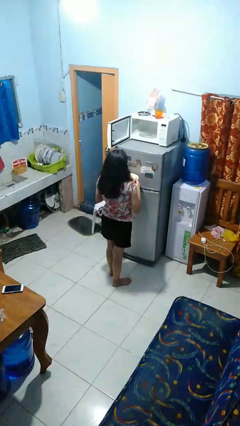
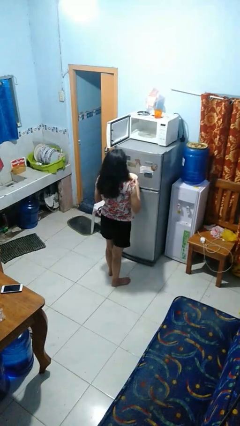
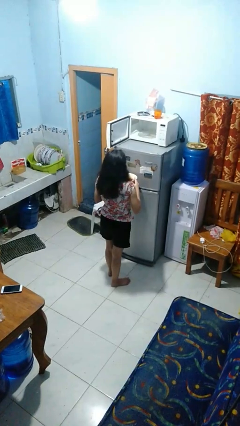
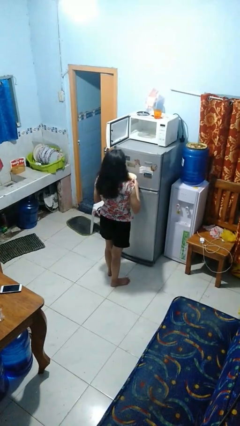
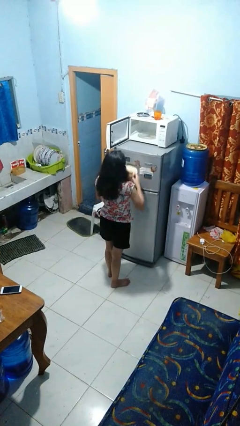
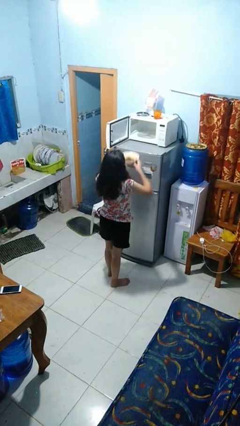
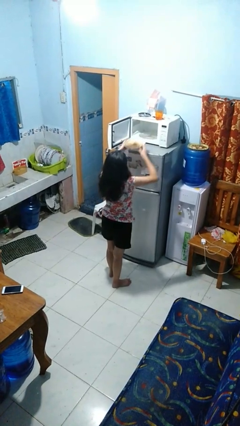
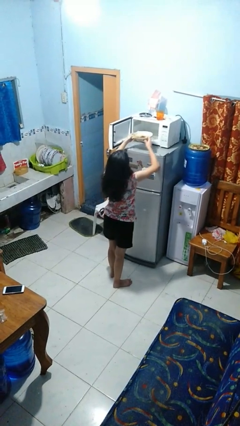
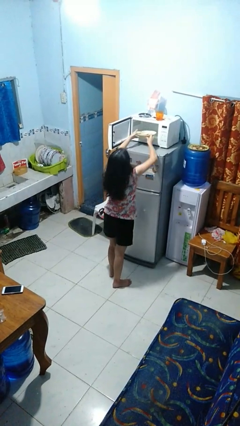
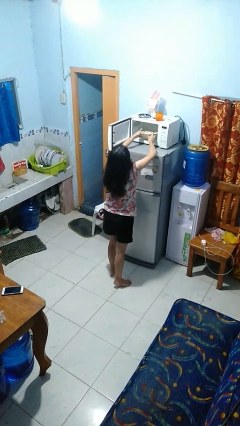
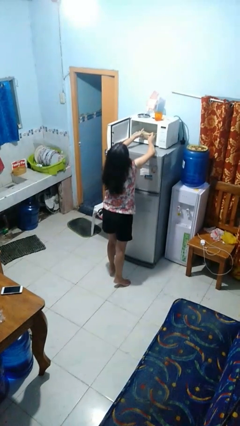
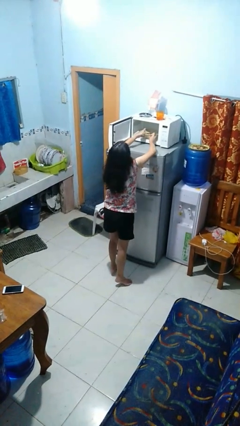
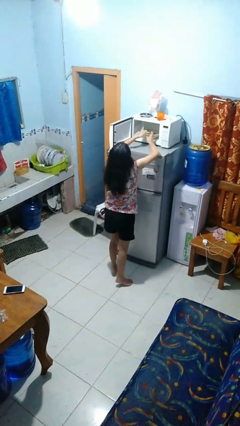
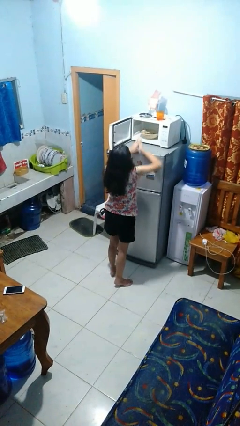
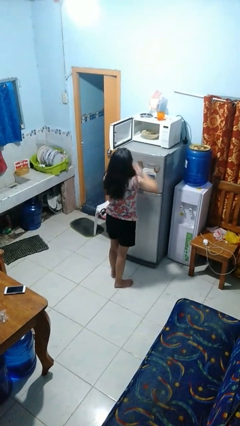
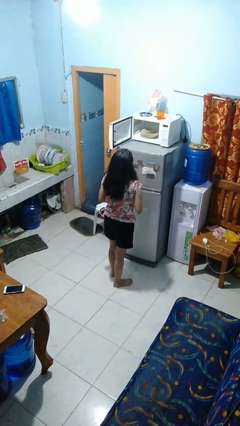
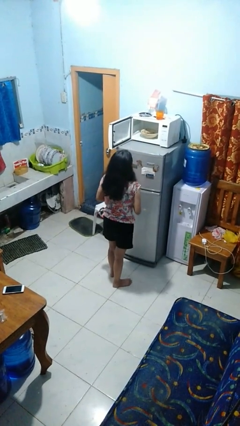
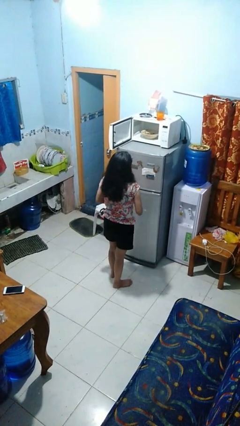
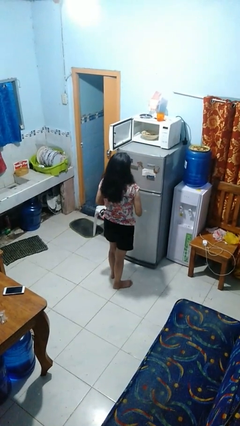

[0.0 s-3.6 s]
person puts object into microwave

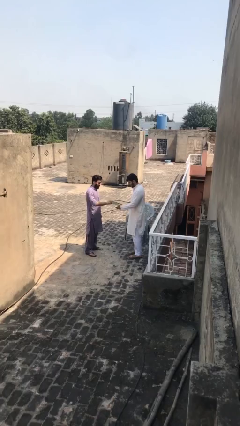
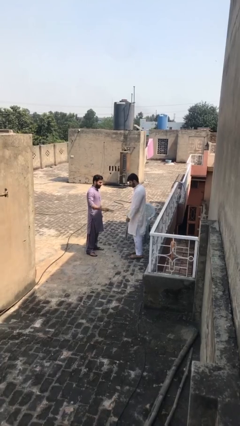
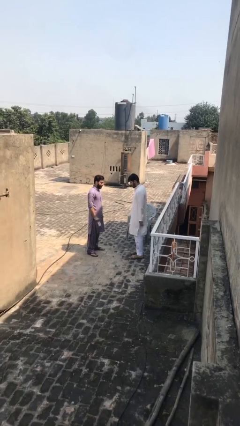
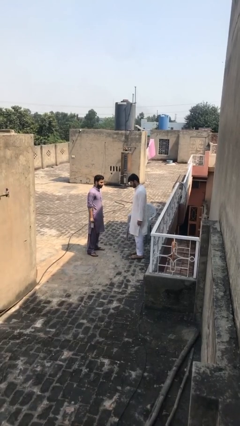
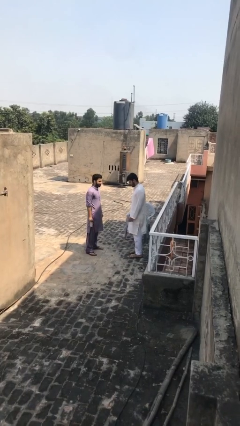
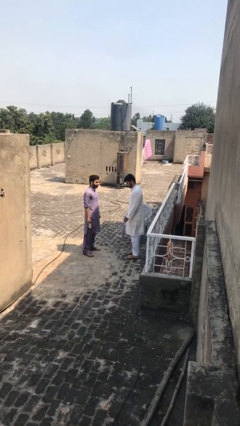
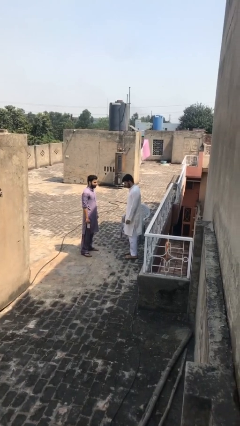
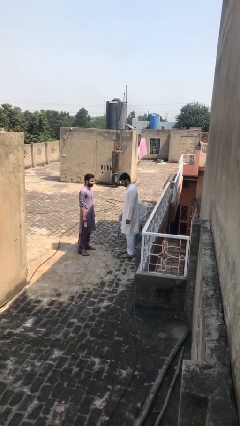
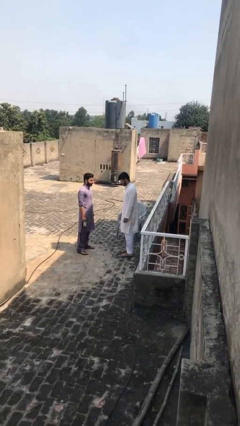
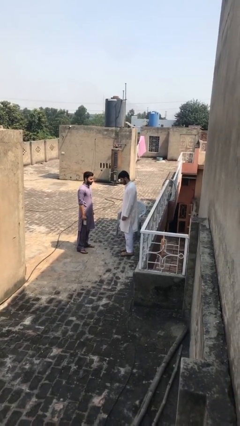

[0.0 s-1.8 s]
person transfers object to person

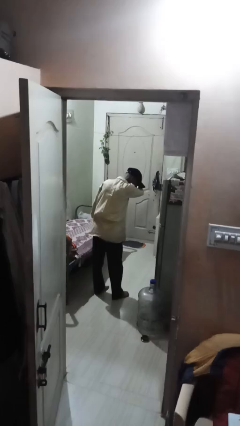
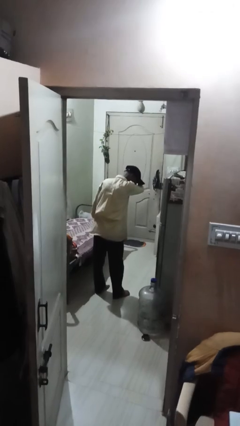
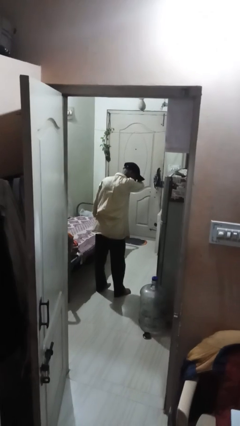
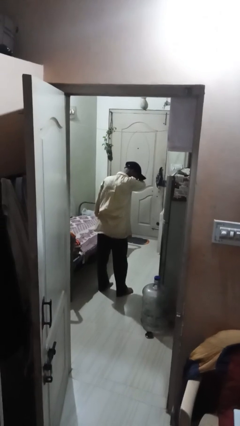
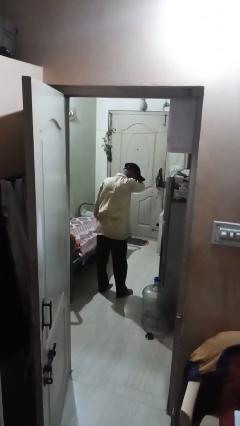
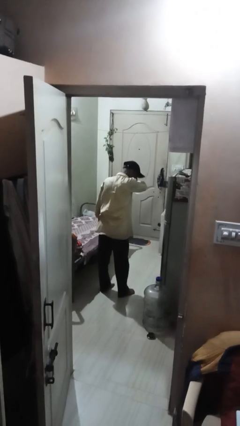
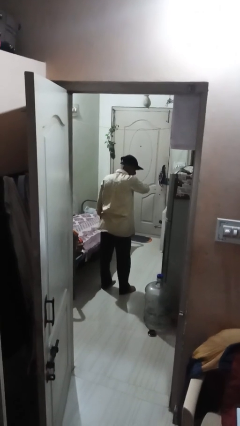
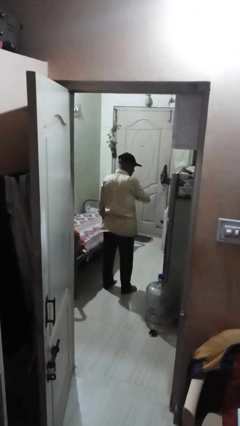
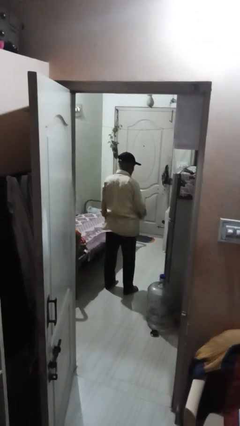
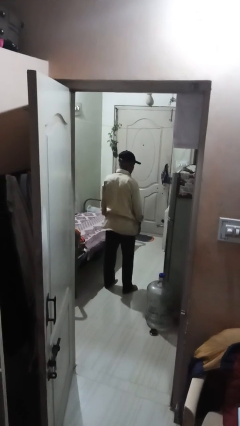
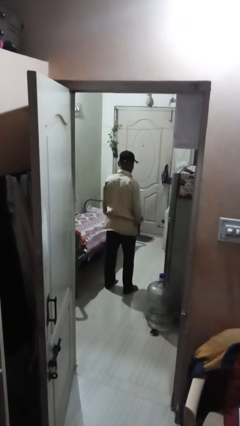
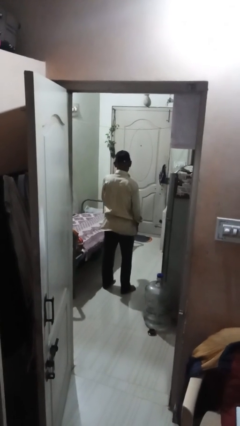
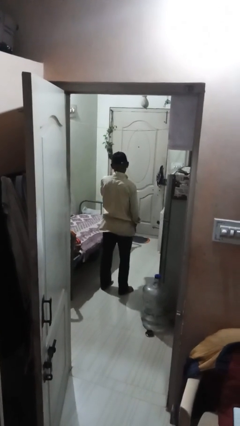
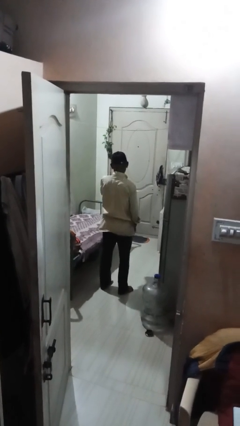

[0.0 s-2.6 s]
person shrugs

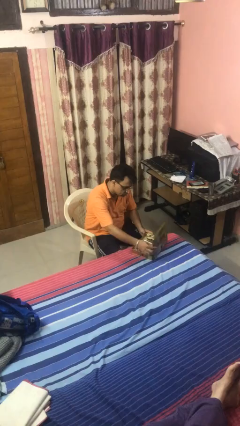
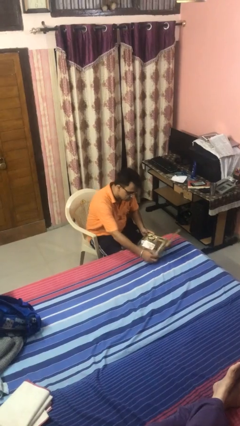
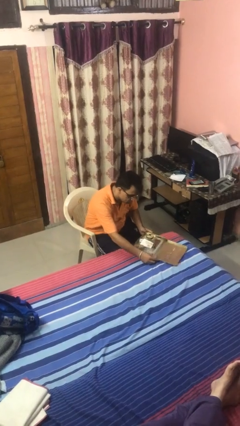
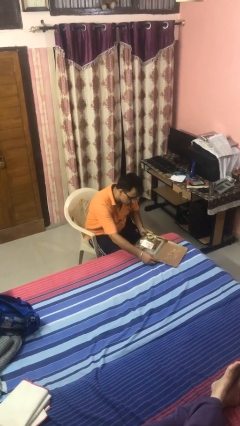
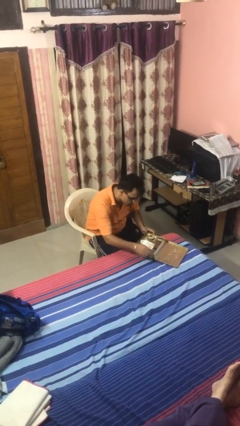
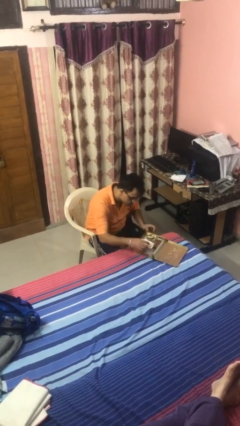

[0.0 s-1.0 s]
person opens jewelry box

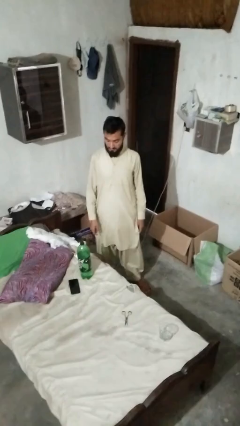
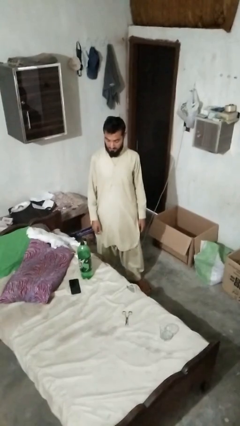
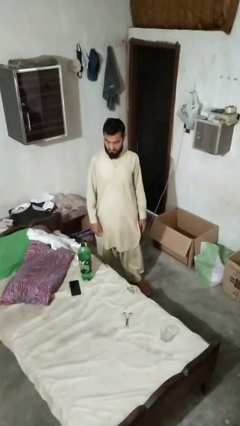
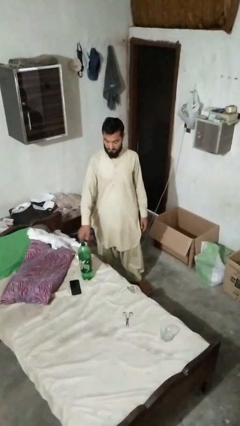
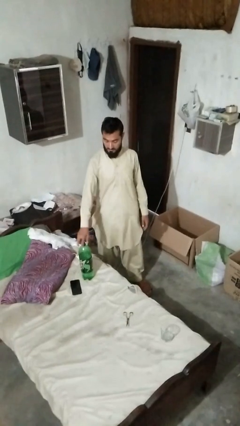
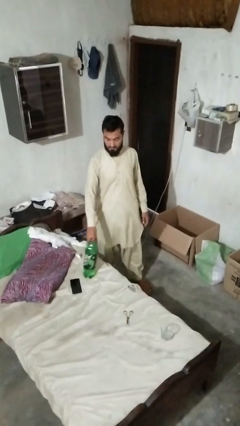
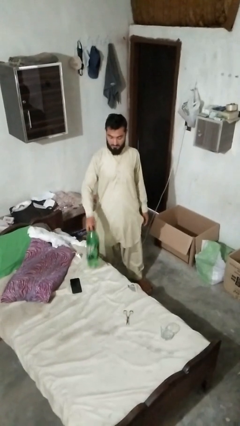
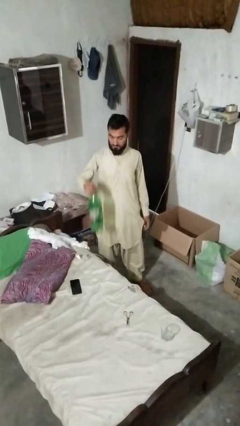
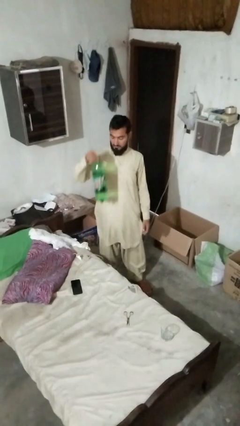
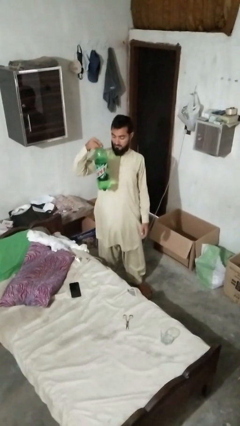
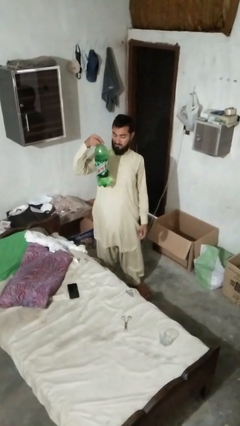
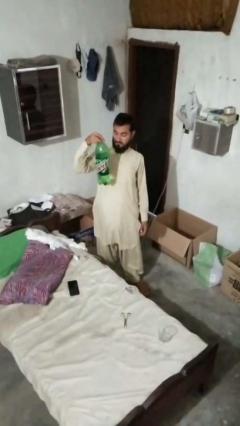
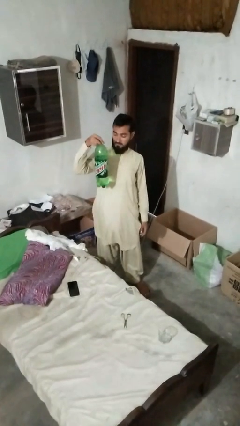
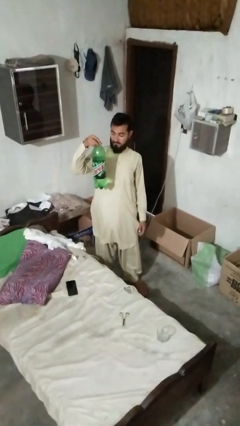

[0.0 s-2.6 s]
person picks up object from bed

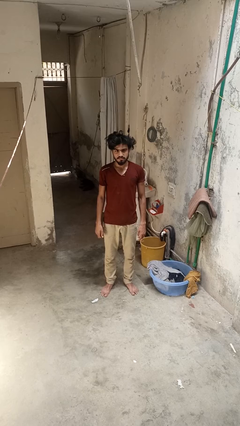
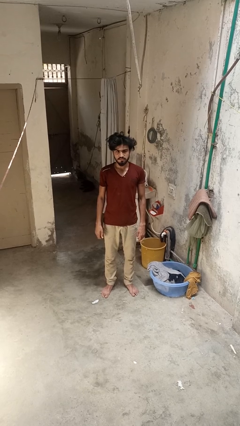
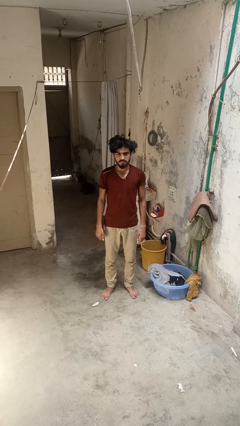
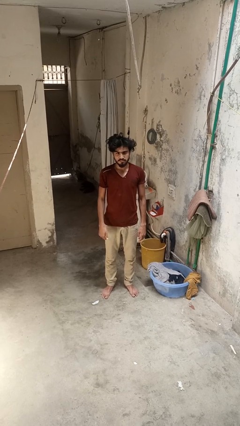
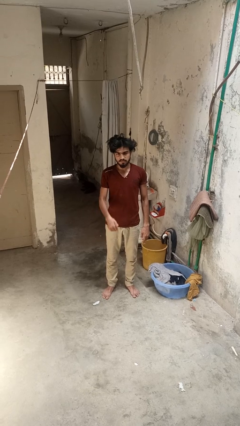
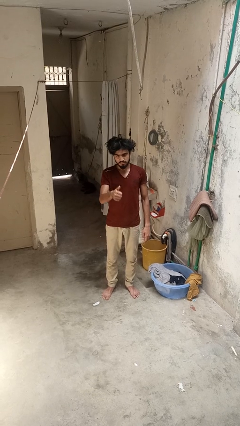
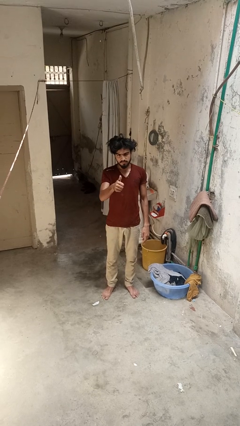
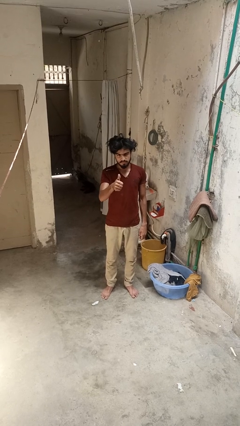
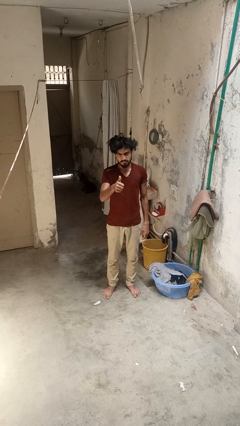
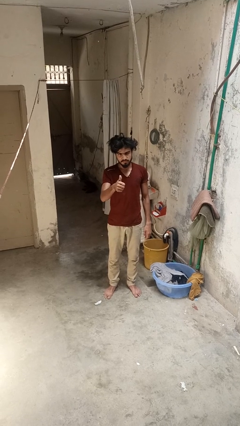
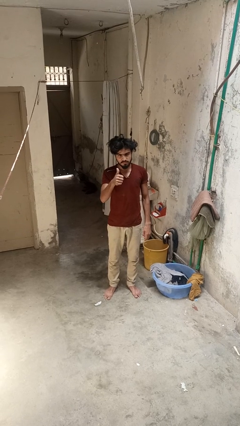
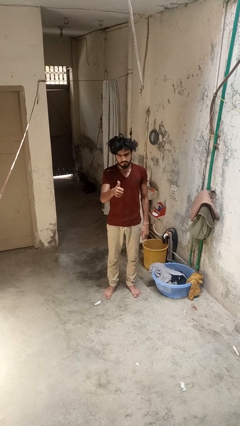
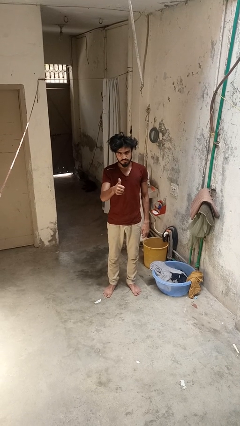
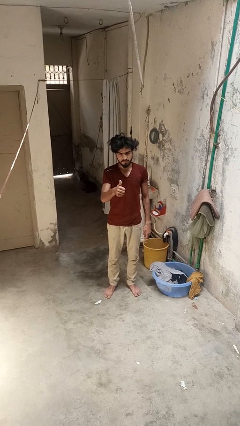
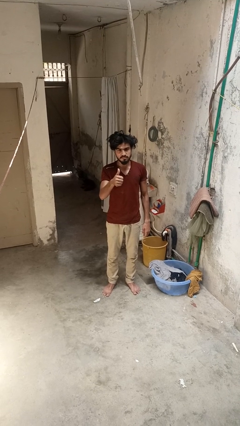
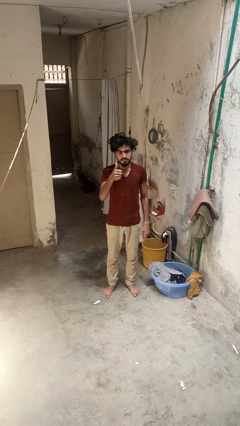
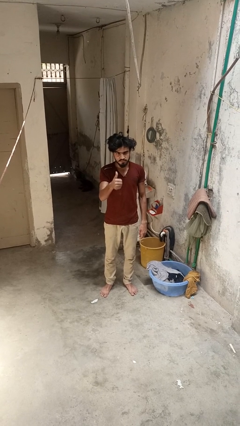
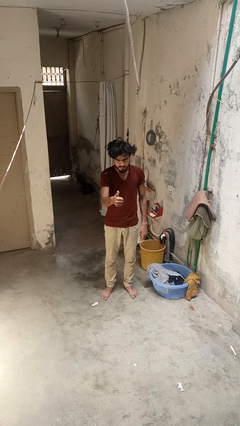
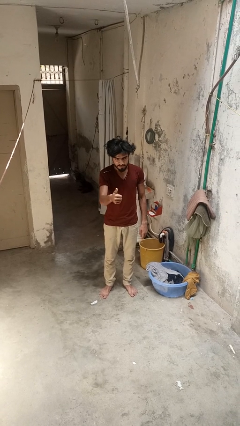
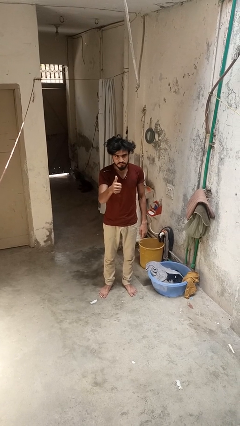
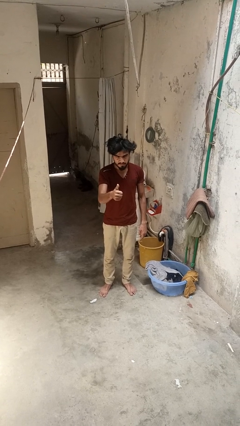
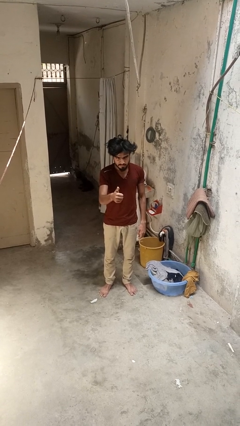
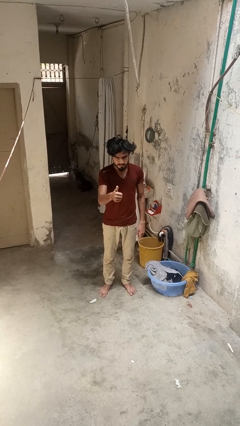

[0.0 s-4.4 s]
person gestures thumbs up

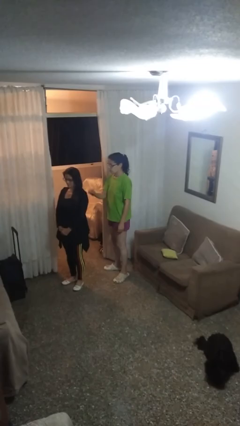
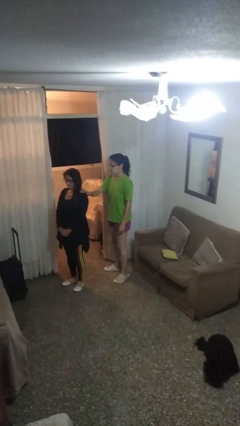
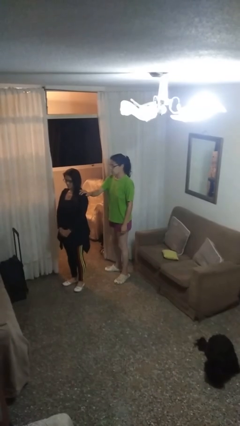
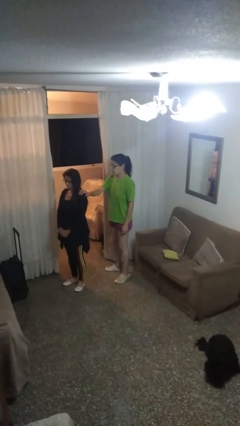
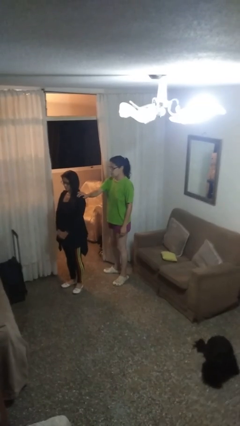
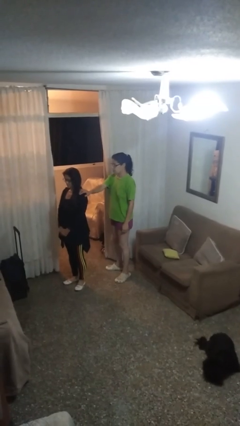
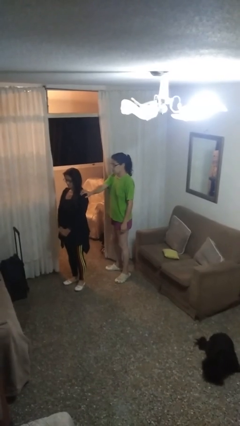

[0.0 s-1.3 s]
person grabs person by shoulder
